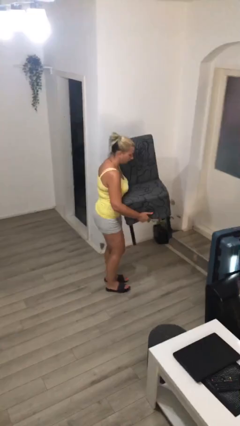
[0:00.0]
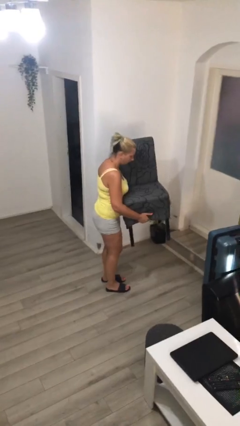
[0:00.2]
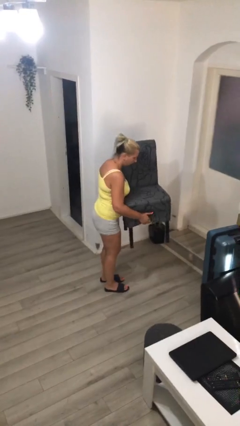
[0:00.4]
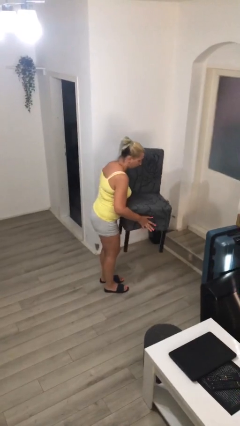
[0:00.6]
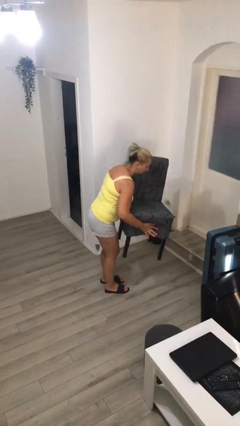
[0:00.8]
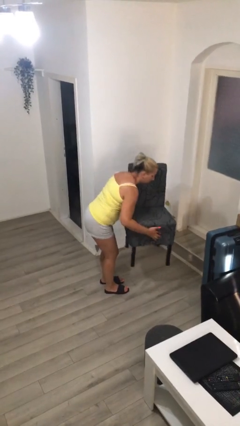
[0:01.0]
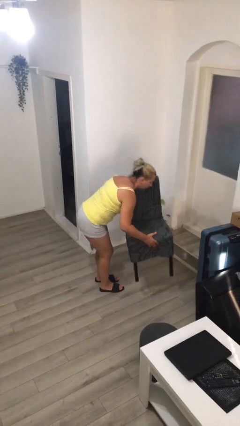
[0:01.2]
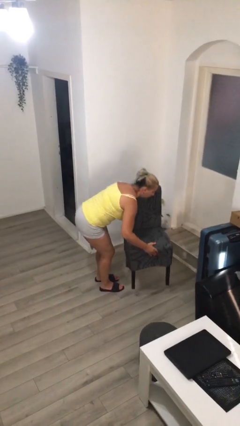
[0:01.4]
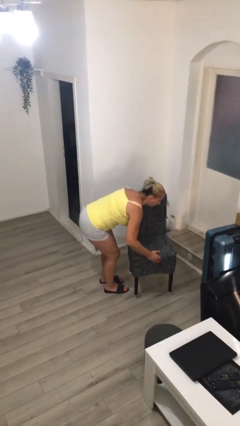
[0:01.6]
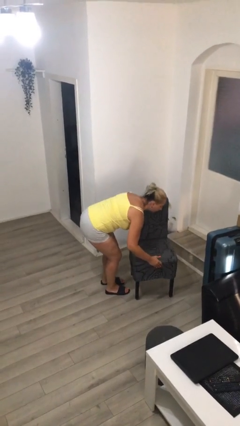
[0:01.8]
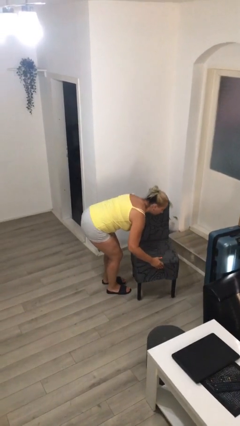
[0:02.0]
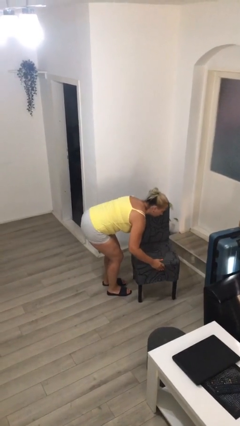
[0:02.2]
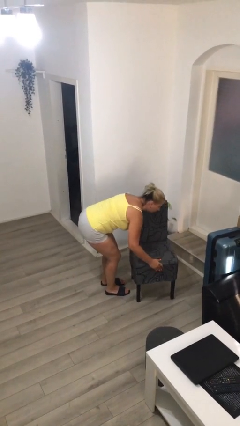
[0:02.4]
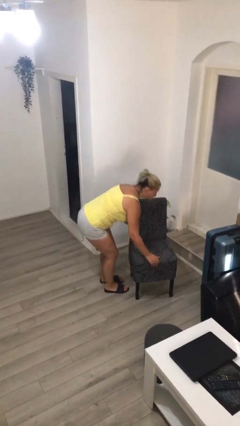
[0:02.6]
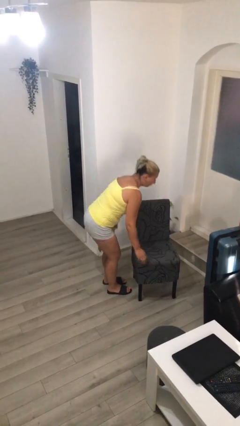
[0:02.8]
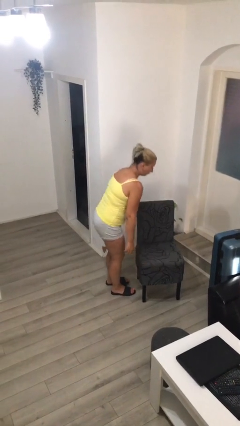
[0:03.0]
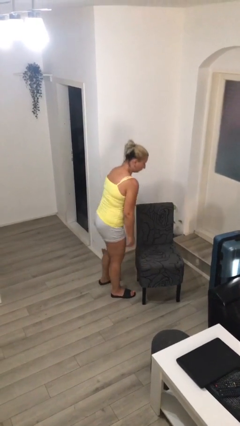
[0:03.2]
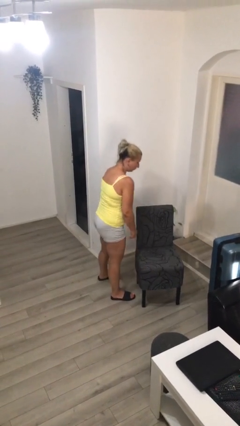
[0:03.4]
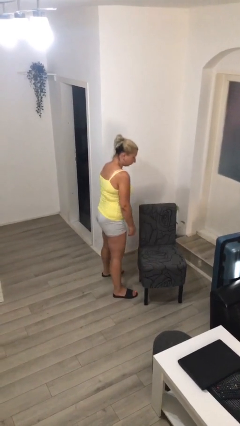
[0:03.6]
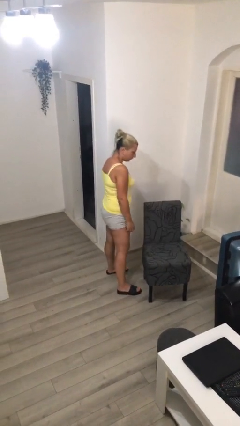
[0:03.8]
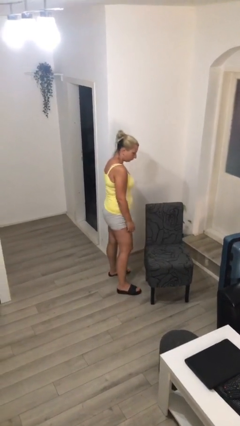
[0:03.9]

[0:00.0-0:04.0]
person puts down object on floor

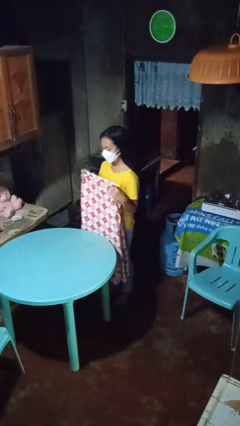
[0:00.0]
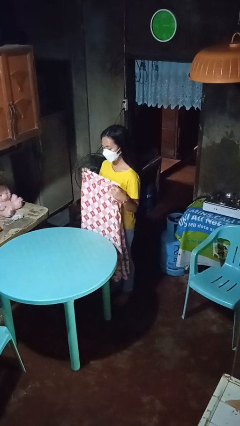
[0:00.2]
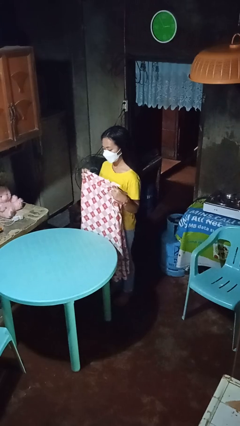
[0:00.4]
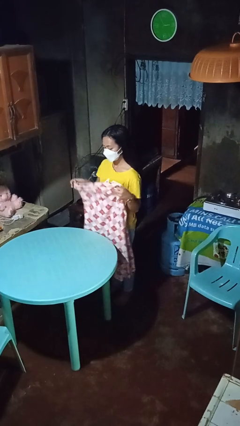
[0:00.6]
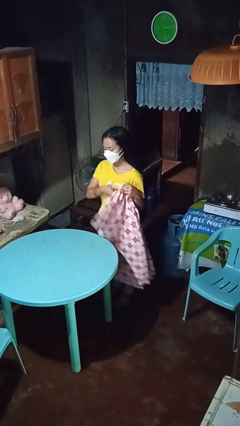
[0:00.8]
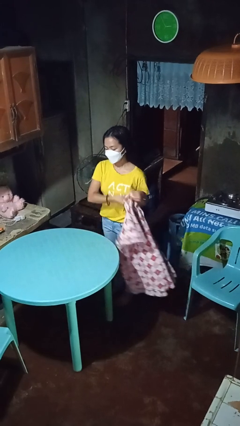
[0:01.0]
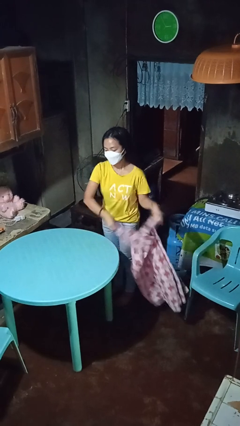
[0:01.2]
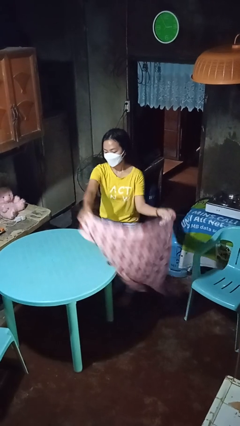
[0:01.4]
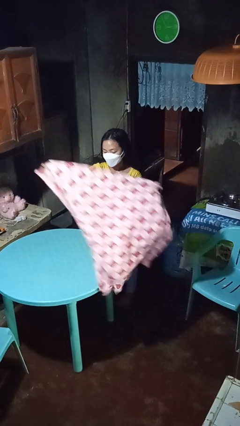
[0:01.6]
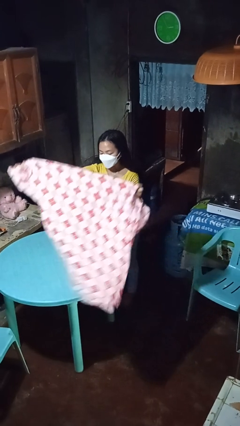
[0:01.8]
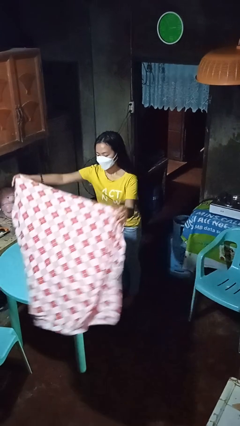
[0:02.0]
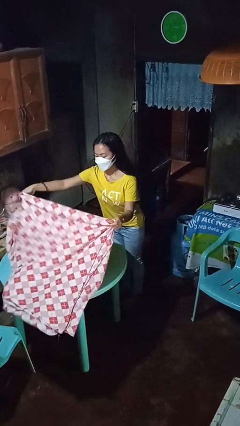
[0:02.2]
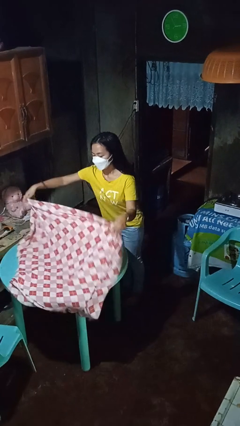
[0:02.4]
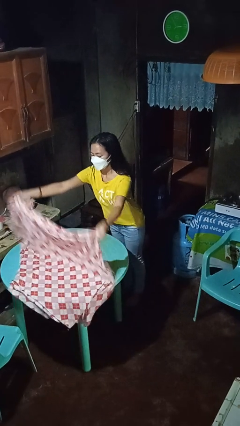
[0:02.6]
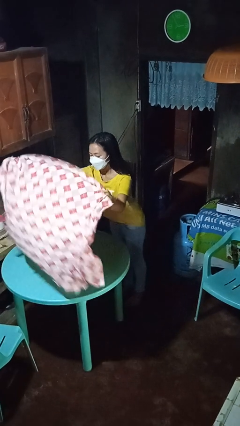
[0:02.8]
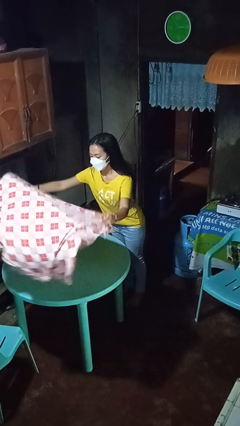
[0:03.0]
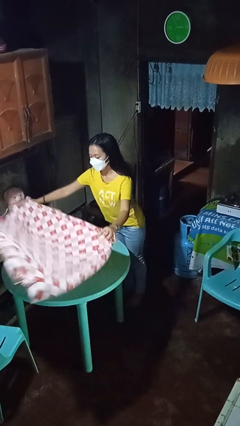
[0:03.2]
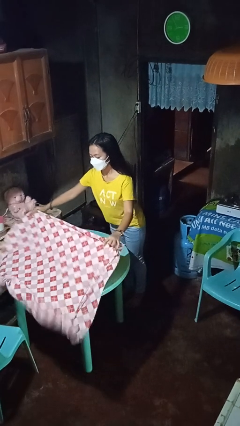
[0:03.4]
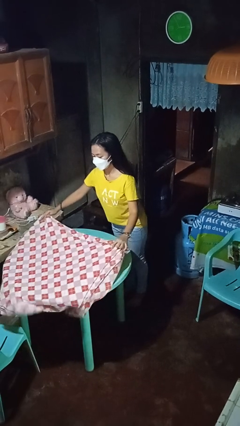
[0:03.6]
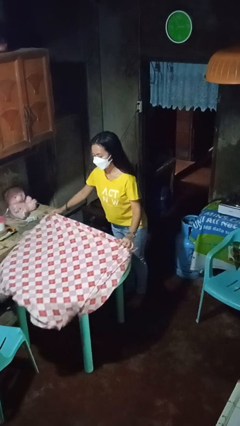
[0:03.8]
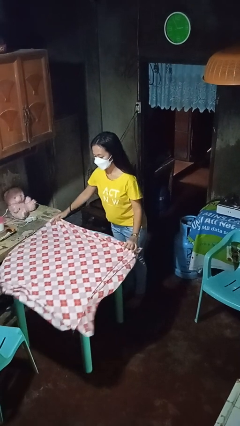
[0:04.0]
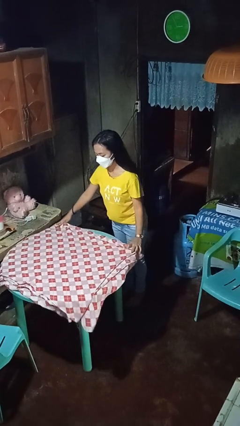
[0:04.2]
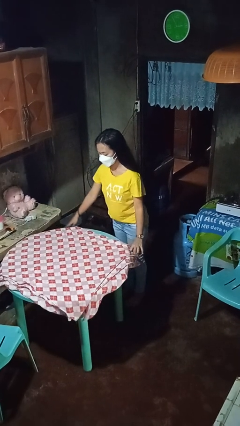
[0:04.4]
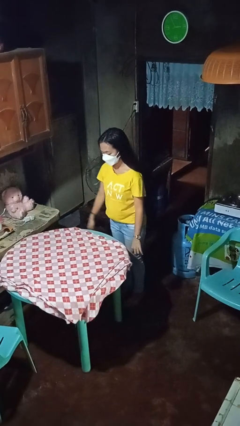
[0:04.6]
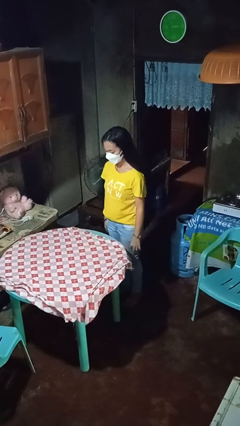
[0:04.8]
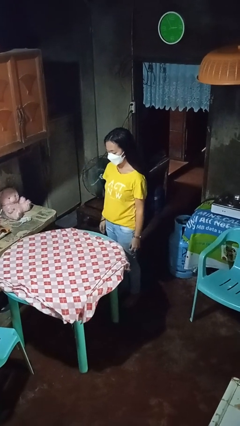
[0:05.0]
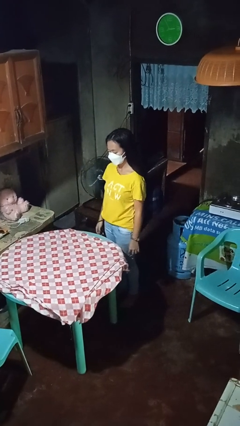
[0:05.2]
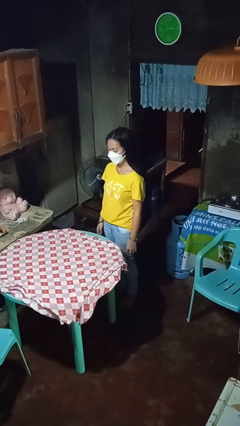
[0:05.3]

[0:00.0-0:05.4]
person spreads tablecloth

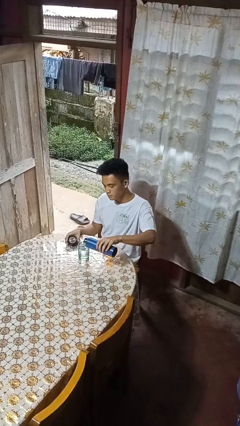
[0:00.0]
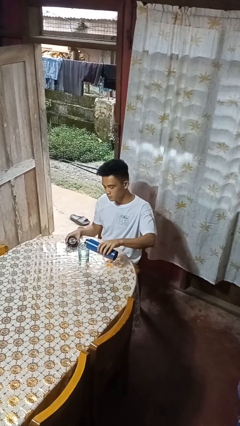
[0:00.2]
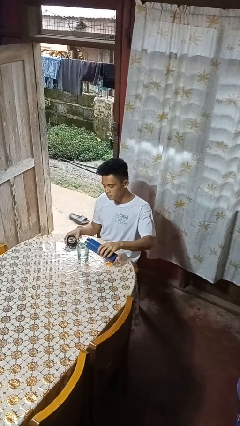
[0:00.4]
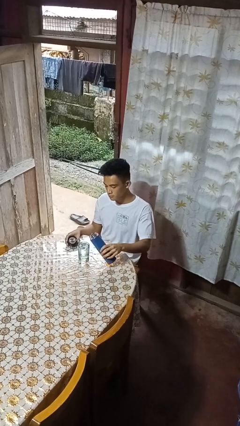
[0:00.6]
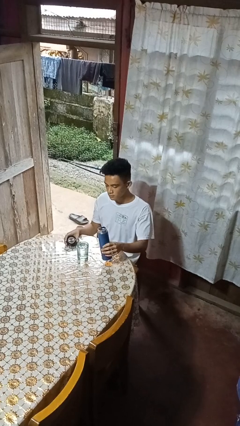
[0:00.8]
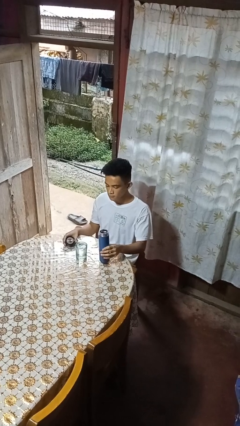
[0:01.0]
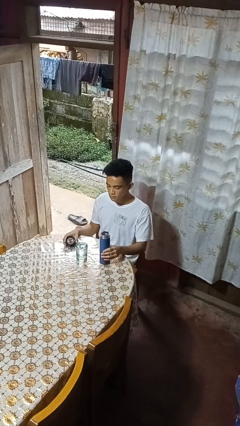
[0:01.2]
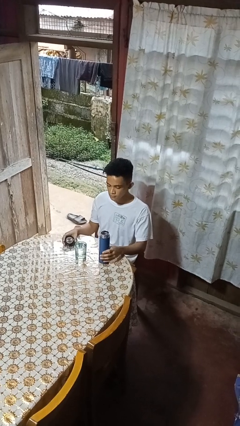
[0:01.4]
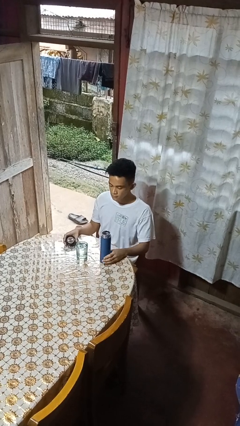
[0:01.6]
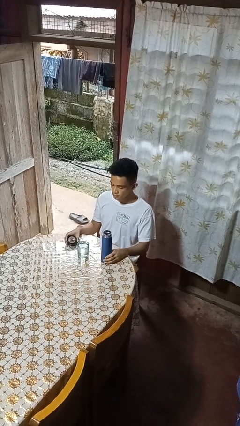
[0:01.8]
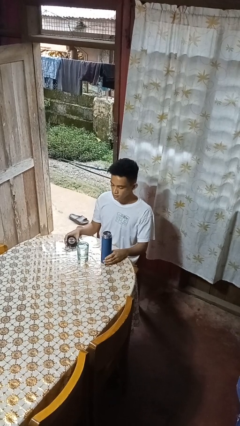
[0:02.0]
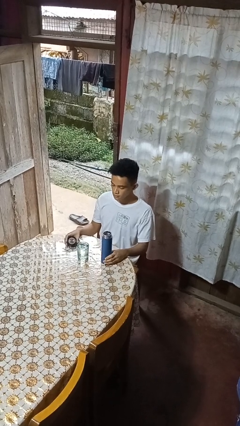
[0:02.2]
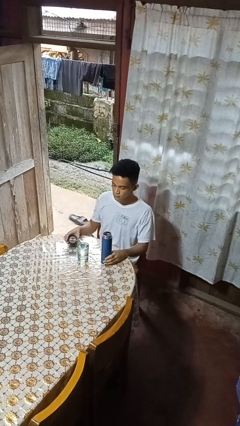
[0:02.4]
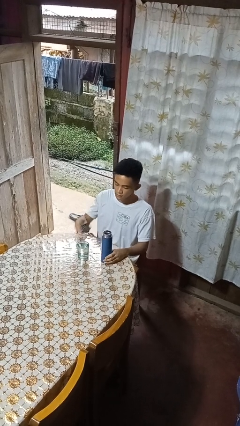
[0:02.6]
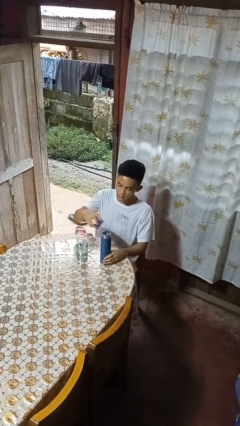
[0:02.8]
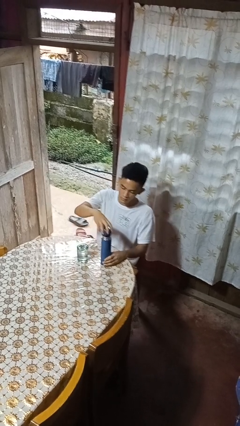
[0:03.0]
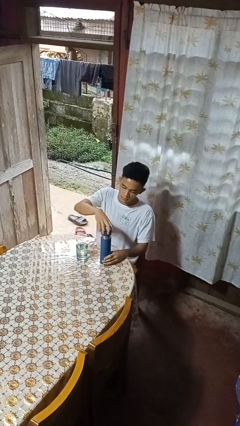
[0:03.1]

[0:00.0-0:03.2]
person pours liquid into cup

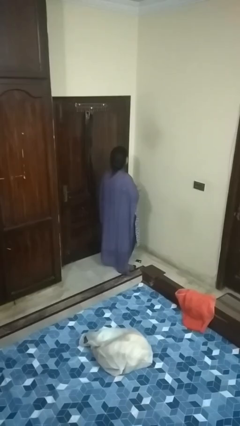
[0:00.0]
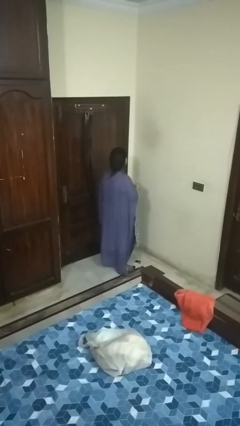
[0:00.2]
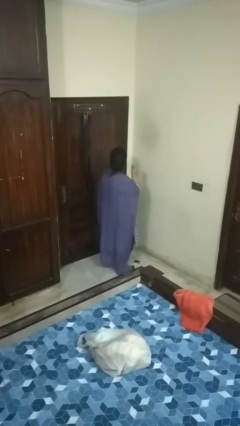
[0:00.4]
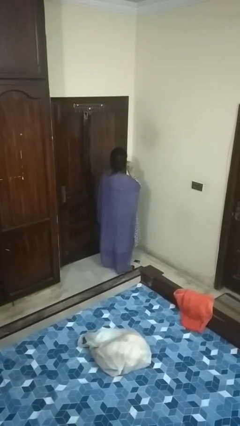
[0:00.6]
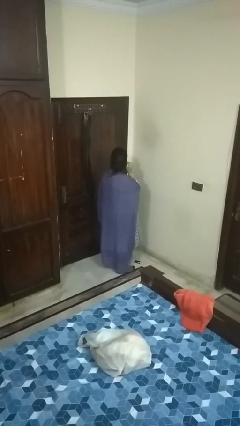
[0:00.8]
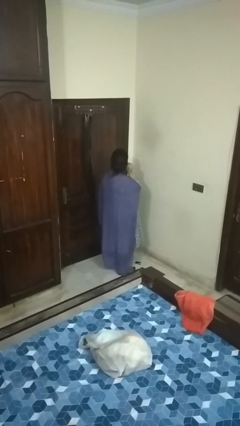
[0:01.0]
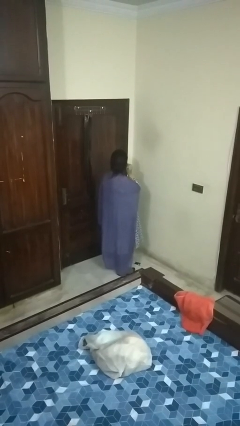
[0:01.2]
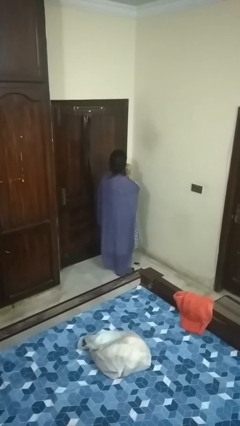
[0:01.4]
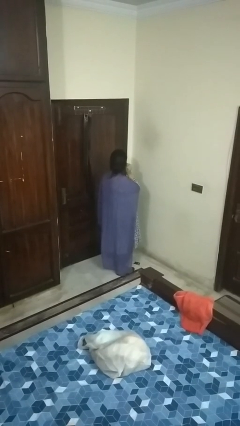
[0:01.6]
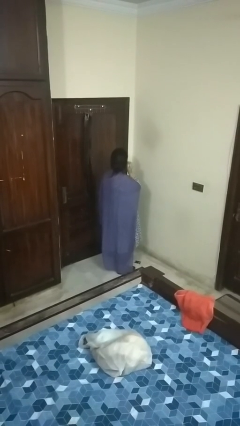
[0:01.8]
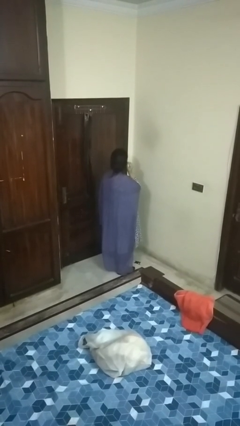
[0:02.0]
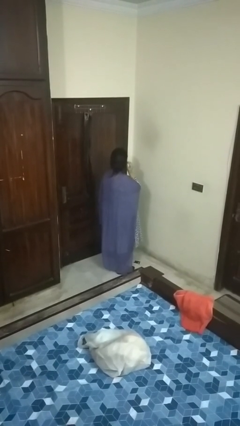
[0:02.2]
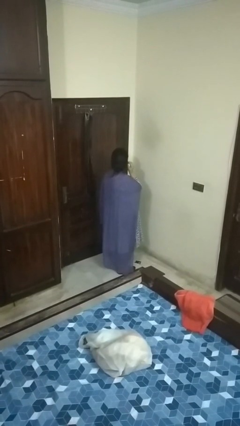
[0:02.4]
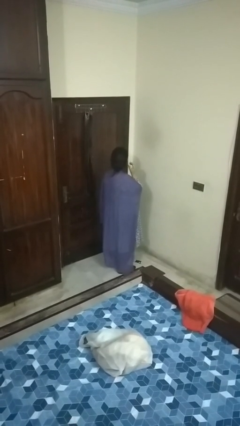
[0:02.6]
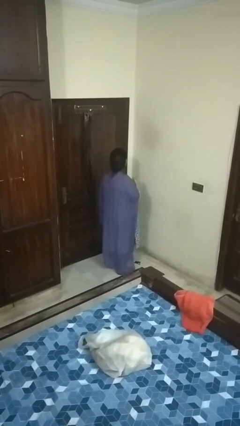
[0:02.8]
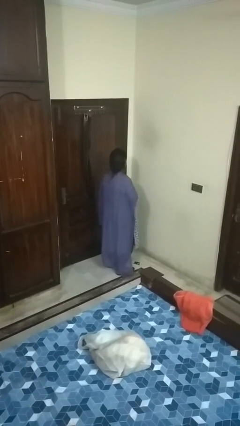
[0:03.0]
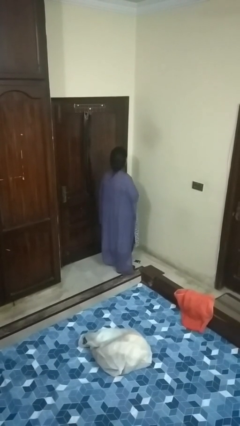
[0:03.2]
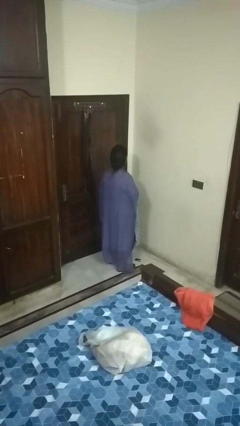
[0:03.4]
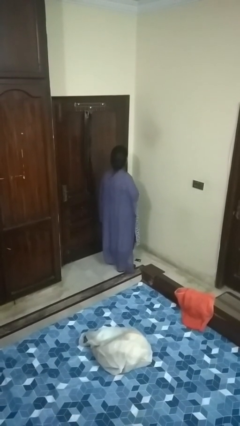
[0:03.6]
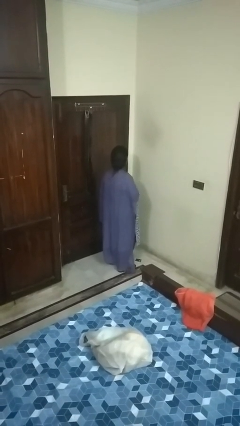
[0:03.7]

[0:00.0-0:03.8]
person puts on earrings

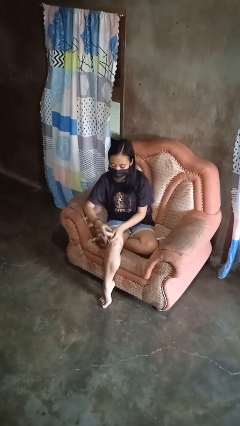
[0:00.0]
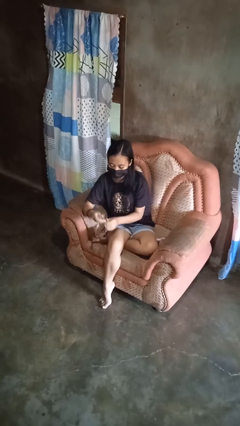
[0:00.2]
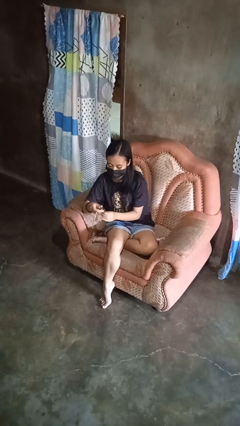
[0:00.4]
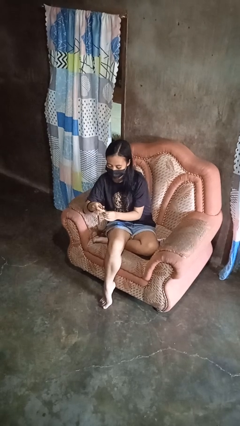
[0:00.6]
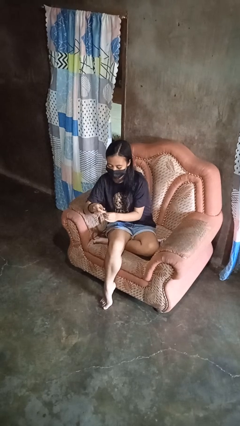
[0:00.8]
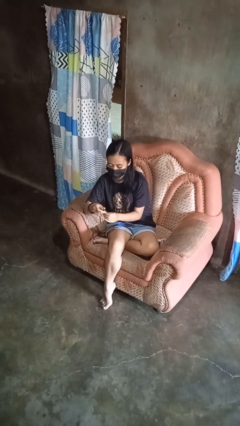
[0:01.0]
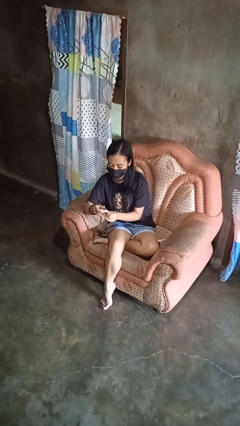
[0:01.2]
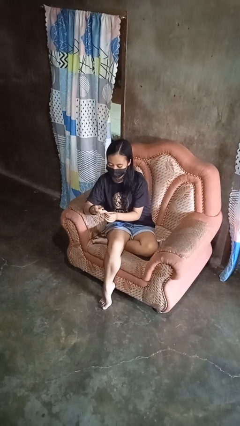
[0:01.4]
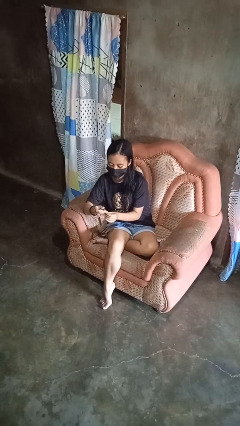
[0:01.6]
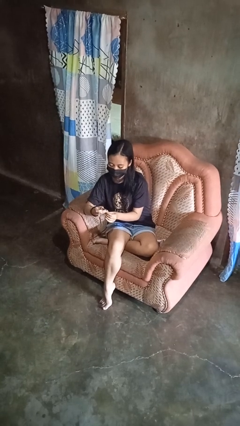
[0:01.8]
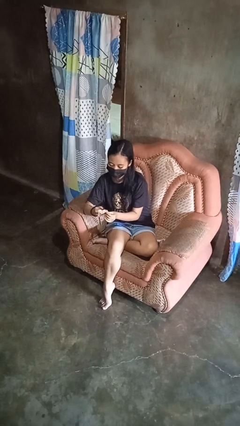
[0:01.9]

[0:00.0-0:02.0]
person clips fingernails
